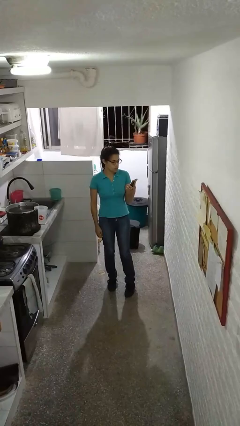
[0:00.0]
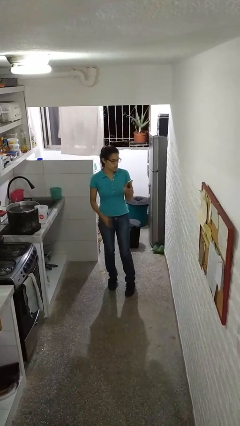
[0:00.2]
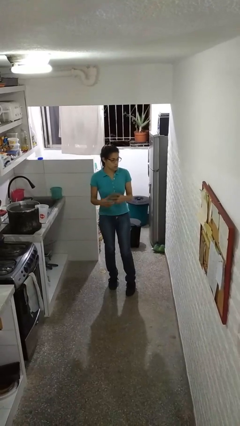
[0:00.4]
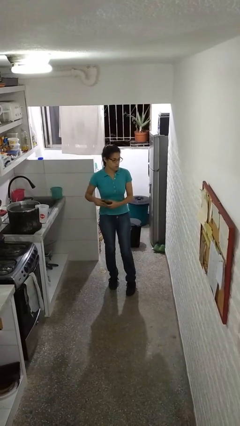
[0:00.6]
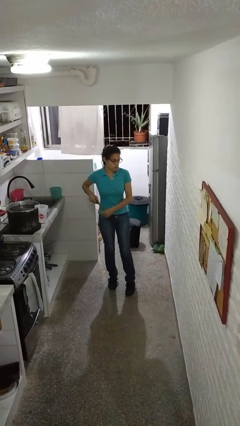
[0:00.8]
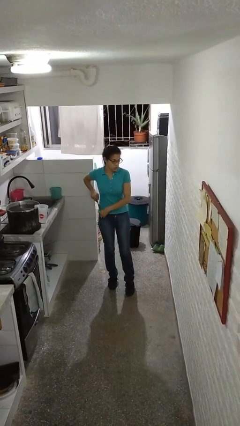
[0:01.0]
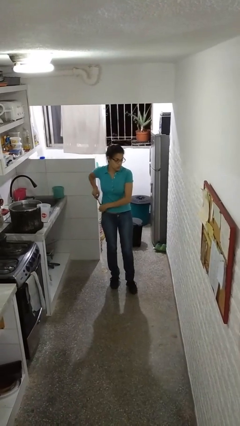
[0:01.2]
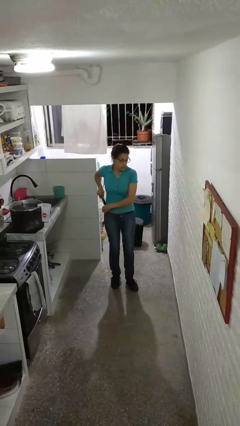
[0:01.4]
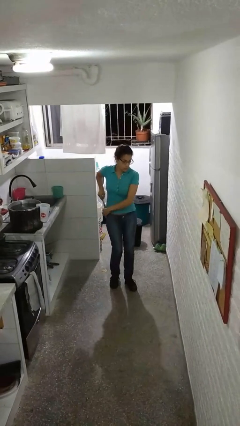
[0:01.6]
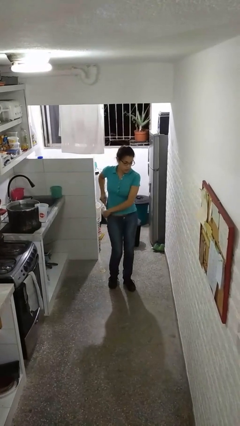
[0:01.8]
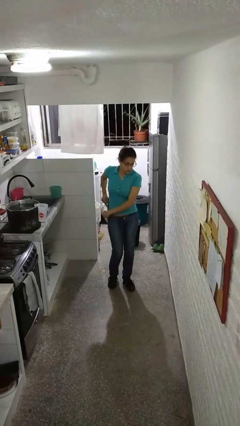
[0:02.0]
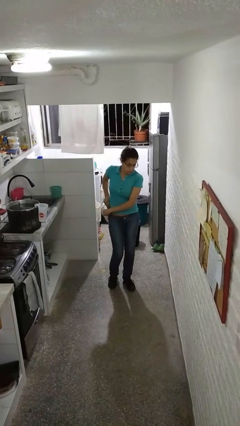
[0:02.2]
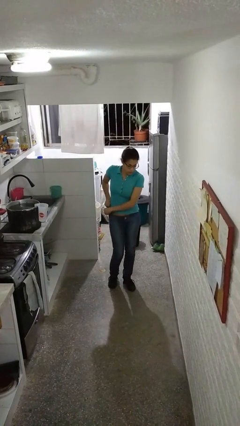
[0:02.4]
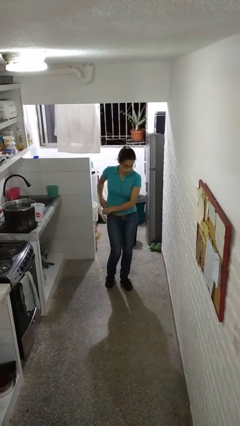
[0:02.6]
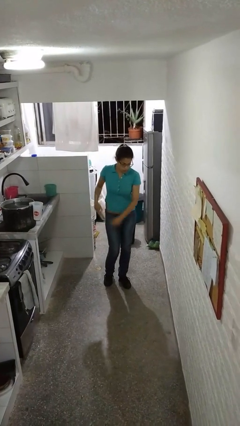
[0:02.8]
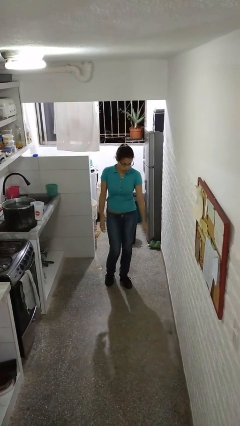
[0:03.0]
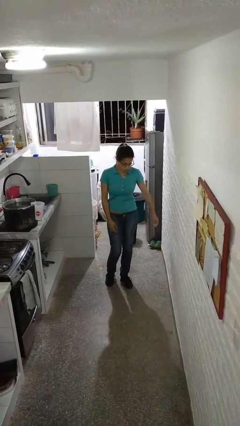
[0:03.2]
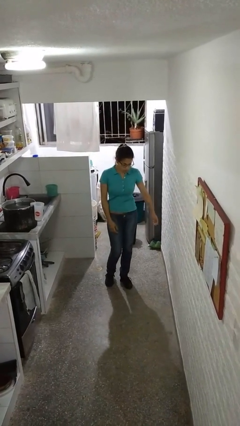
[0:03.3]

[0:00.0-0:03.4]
person puts phone into pocket

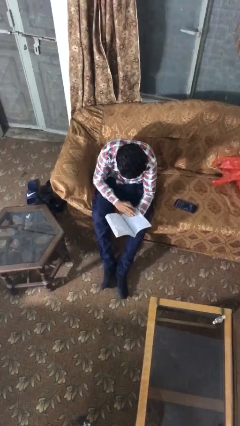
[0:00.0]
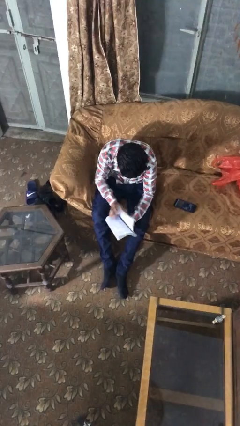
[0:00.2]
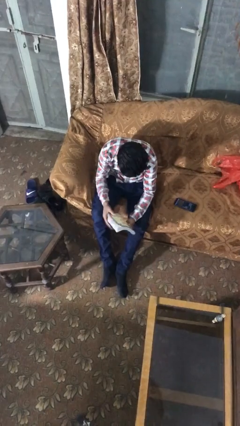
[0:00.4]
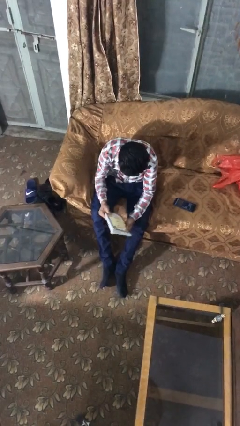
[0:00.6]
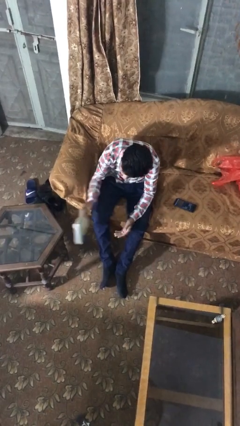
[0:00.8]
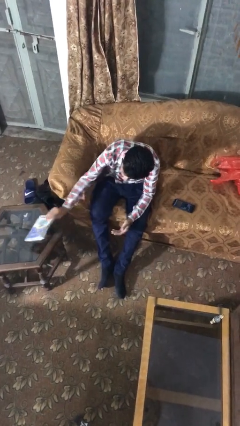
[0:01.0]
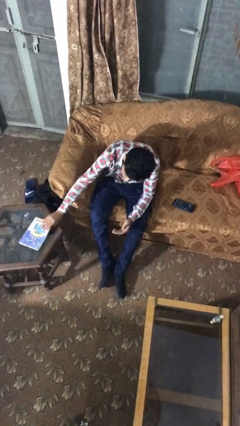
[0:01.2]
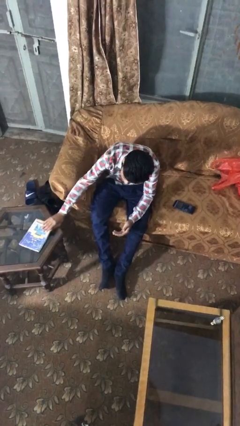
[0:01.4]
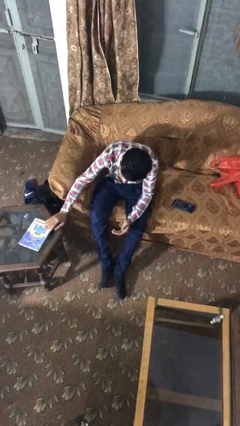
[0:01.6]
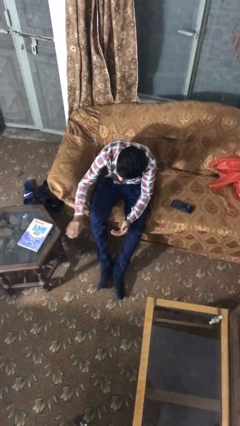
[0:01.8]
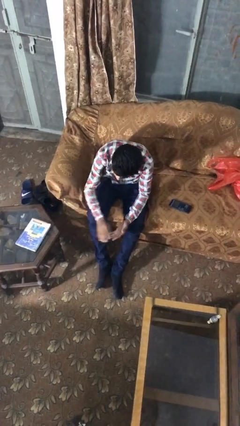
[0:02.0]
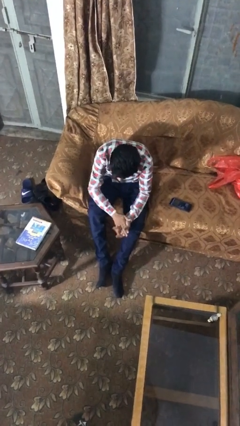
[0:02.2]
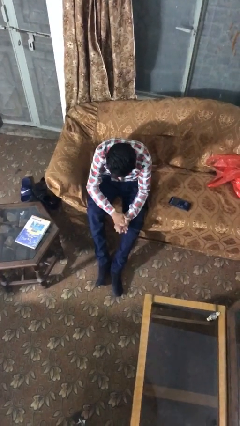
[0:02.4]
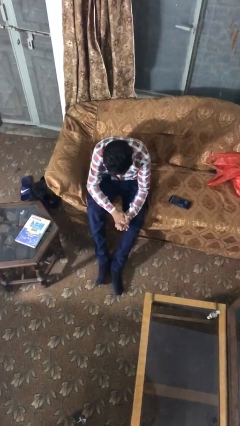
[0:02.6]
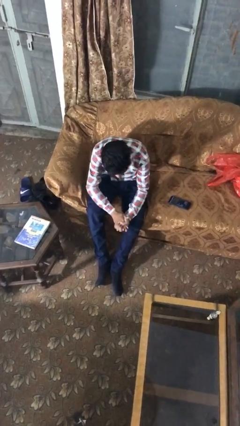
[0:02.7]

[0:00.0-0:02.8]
person puts down object on table

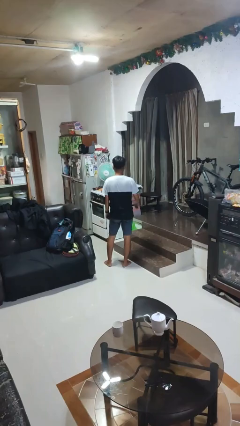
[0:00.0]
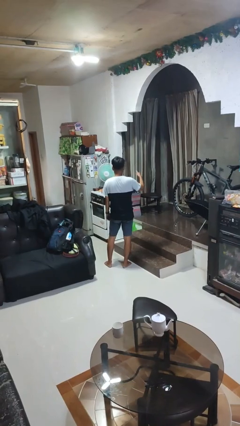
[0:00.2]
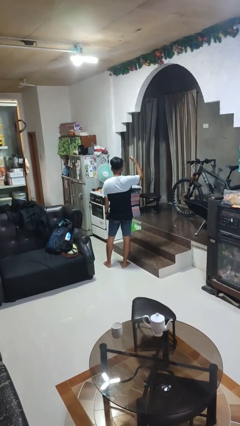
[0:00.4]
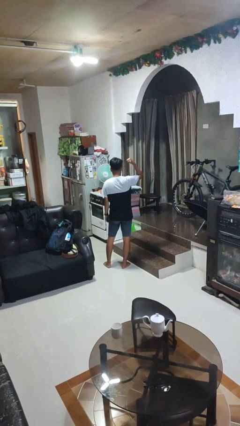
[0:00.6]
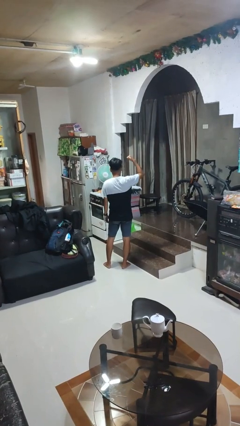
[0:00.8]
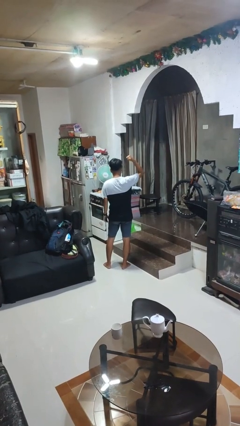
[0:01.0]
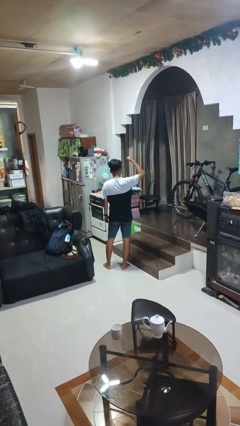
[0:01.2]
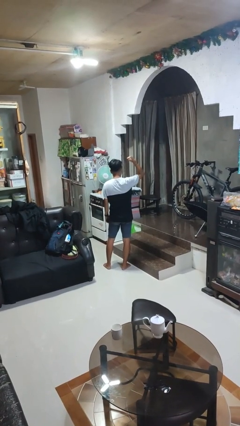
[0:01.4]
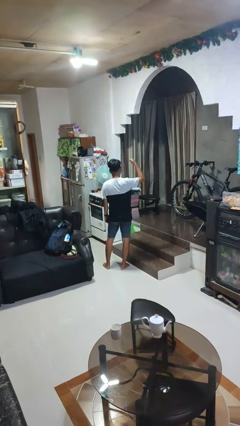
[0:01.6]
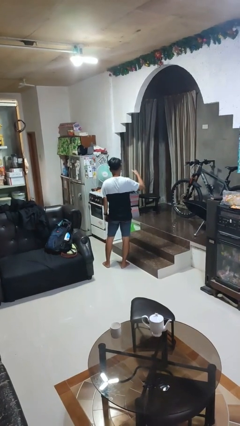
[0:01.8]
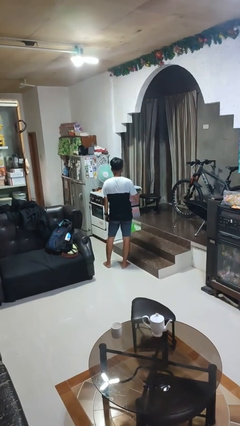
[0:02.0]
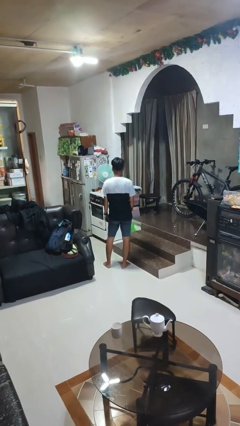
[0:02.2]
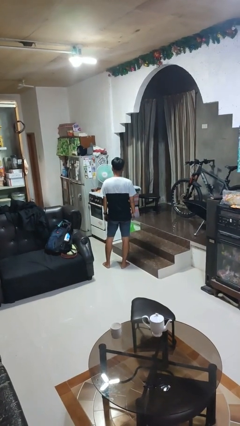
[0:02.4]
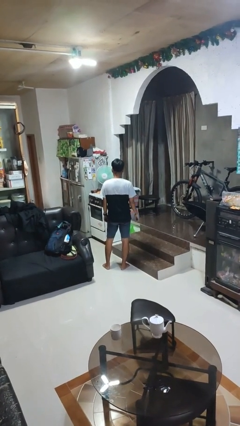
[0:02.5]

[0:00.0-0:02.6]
person gestures behind me

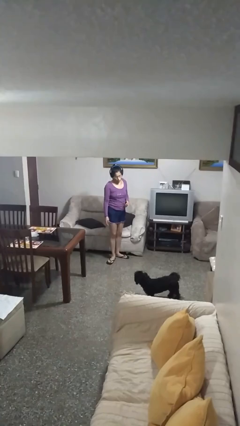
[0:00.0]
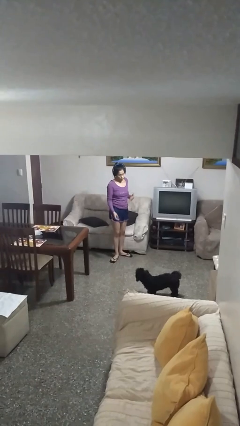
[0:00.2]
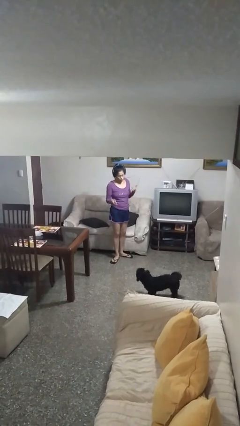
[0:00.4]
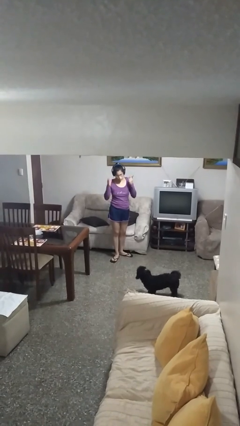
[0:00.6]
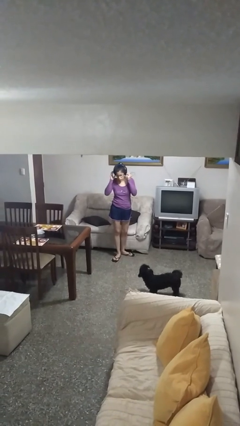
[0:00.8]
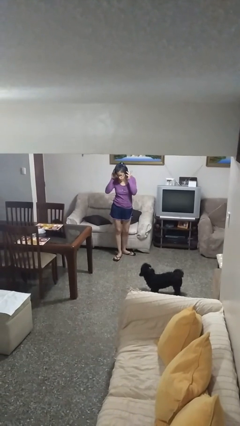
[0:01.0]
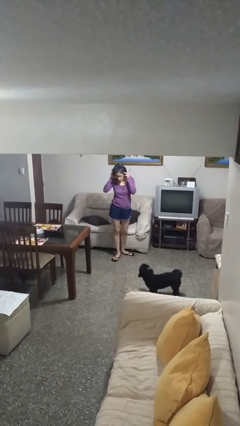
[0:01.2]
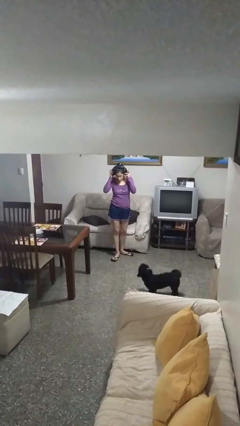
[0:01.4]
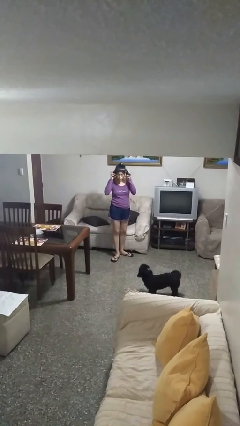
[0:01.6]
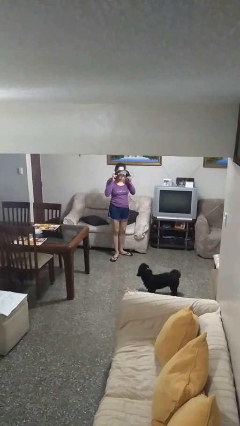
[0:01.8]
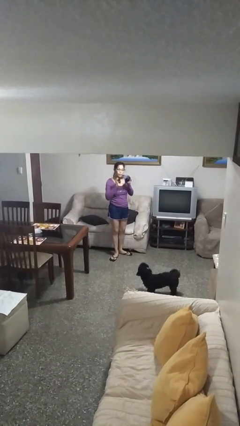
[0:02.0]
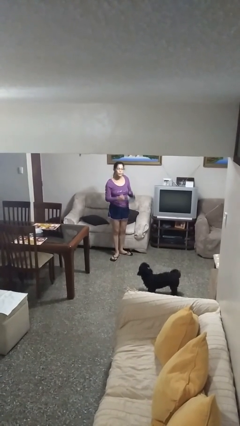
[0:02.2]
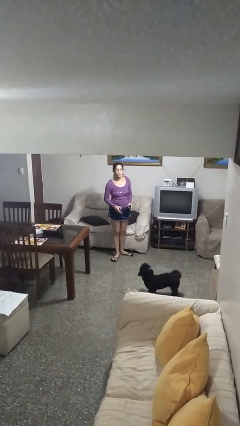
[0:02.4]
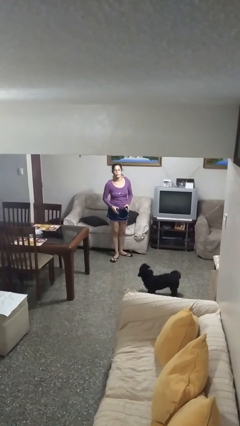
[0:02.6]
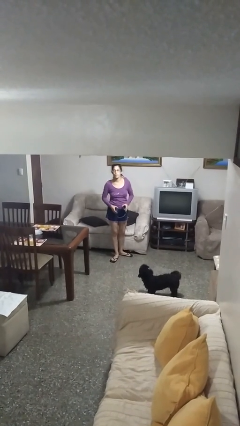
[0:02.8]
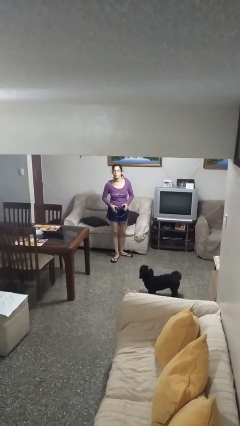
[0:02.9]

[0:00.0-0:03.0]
person takes off headphones

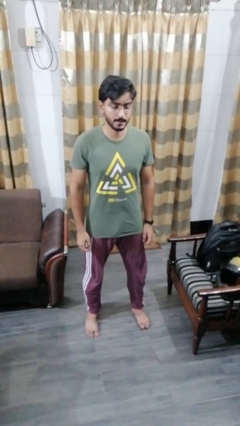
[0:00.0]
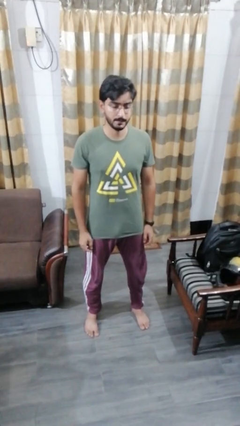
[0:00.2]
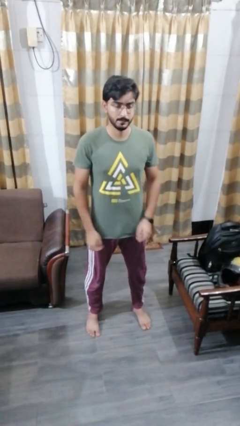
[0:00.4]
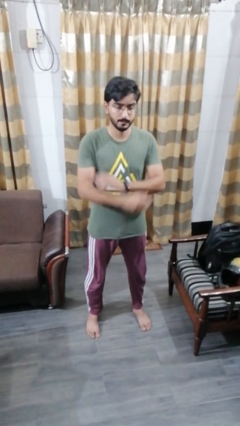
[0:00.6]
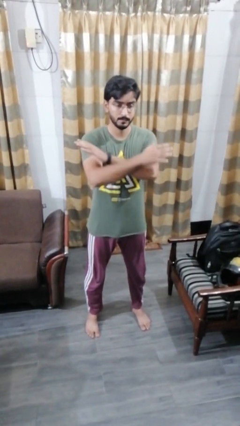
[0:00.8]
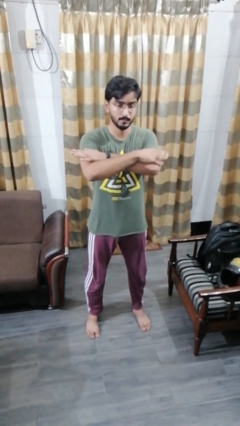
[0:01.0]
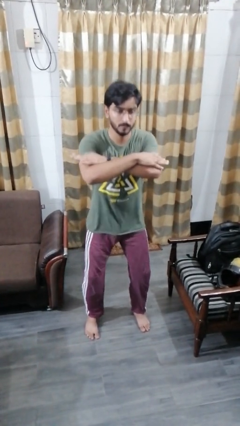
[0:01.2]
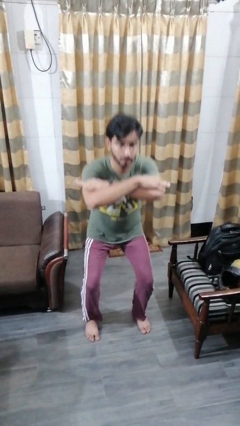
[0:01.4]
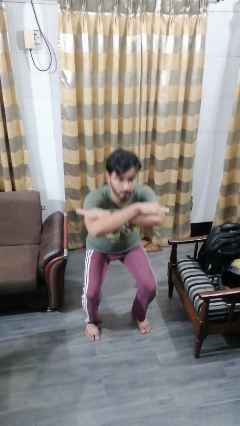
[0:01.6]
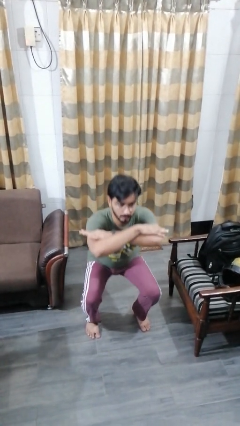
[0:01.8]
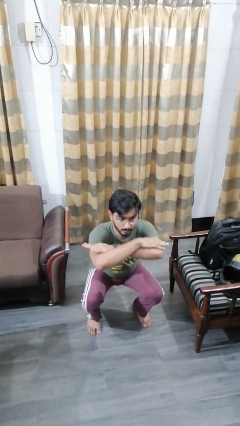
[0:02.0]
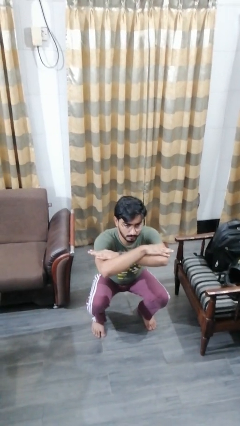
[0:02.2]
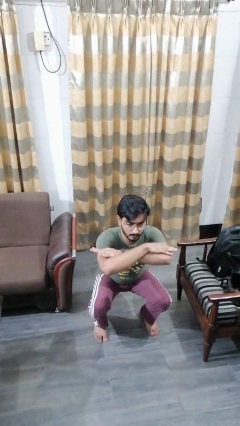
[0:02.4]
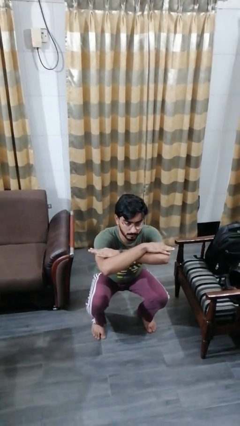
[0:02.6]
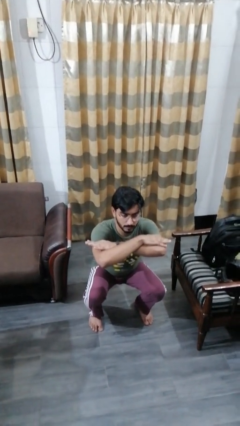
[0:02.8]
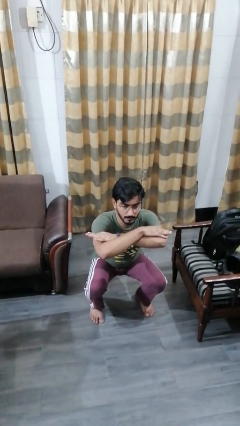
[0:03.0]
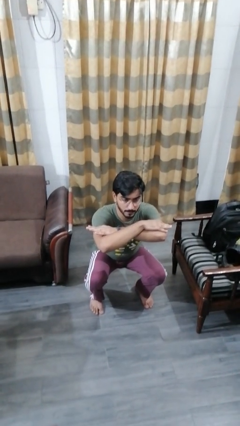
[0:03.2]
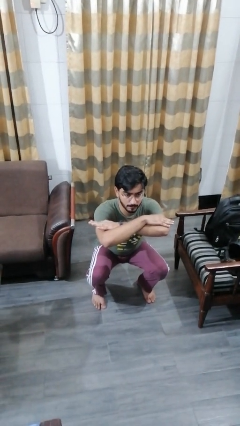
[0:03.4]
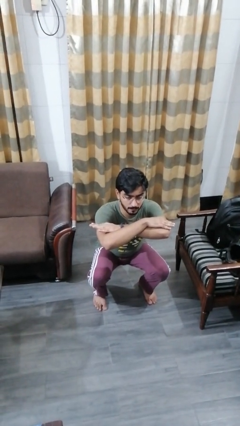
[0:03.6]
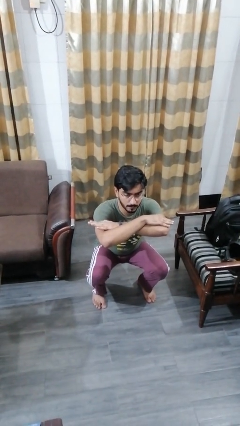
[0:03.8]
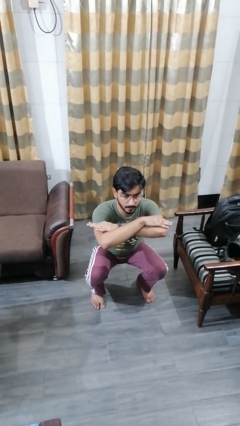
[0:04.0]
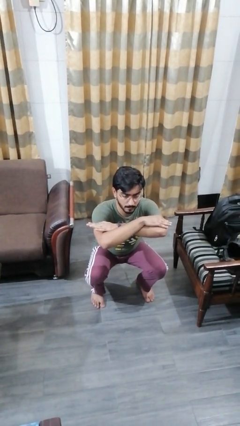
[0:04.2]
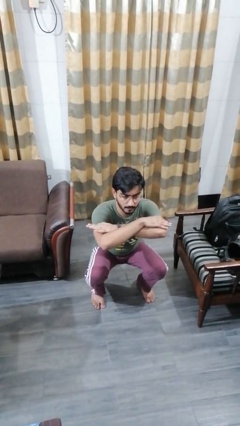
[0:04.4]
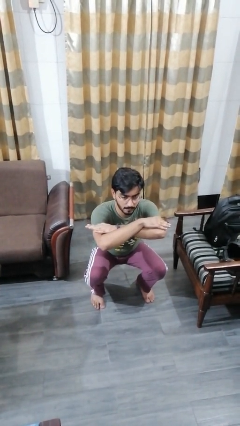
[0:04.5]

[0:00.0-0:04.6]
person sits crisscross

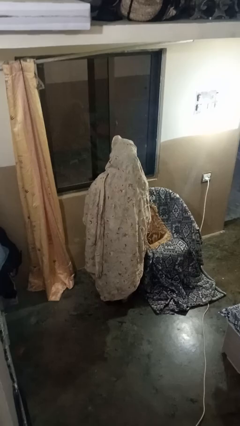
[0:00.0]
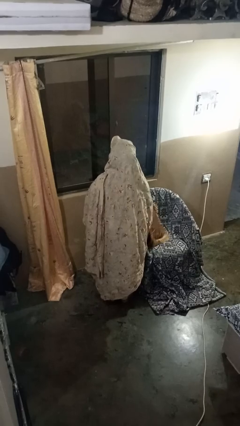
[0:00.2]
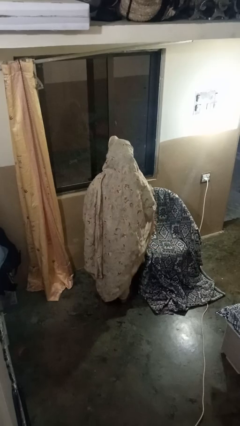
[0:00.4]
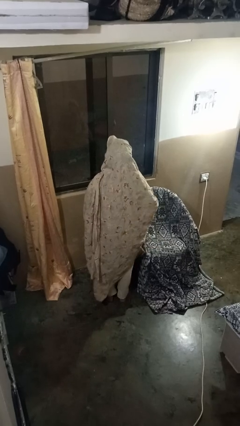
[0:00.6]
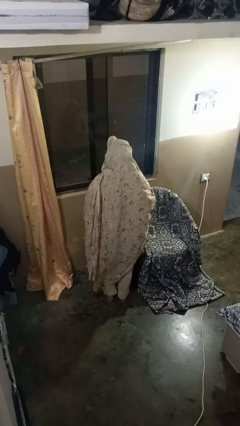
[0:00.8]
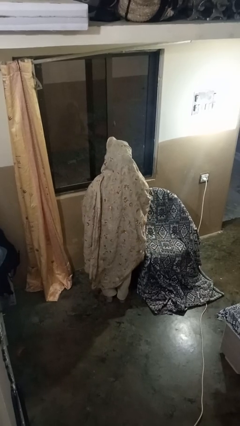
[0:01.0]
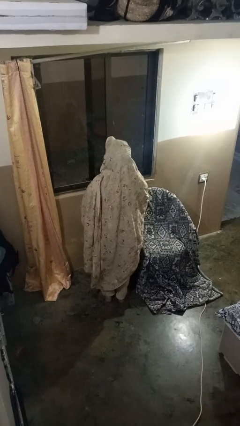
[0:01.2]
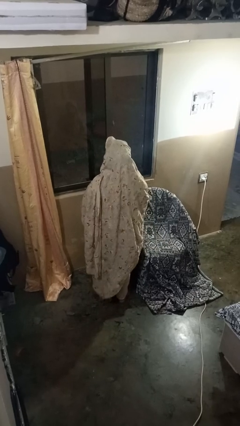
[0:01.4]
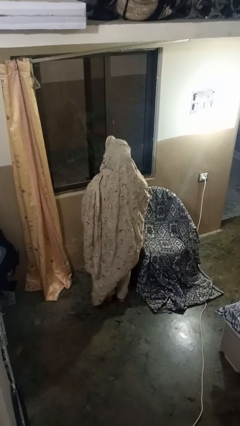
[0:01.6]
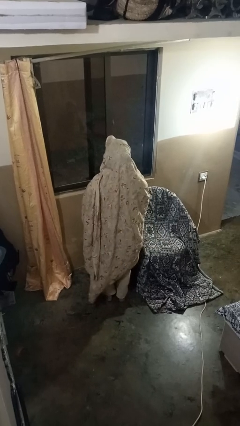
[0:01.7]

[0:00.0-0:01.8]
person picks up object from couch
